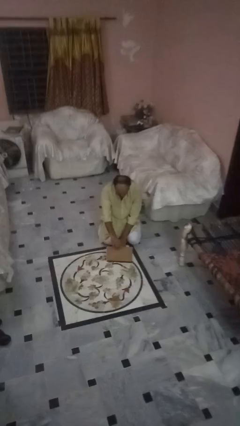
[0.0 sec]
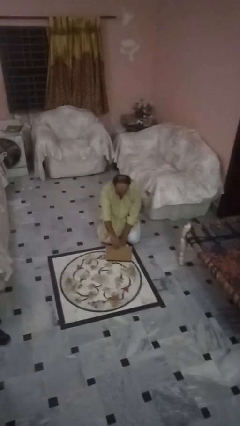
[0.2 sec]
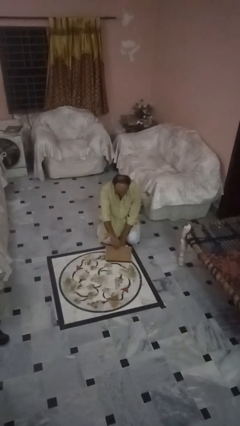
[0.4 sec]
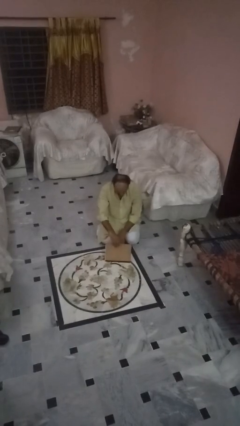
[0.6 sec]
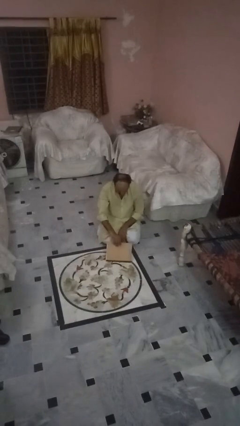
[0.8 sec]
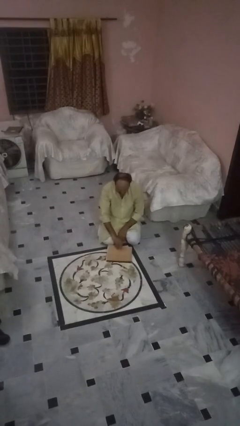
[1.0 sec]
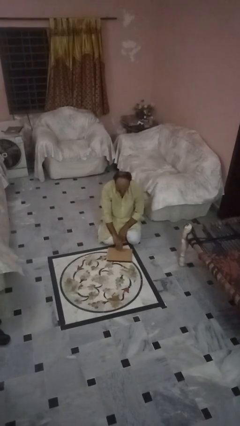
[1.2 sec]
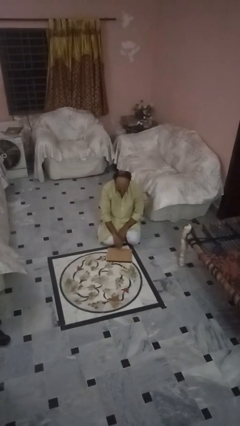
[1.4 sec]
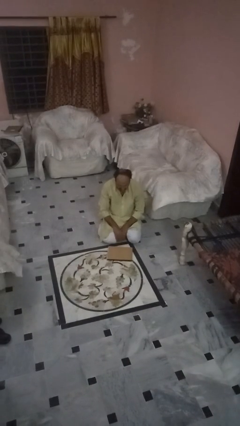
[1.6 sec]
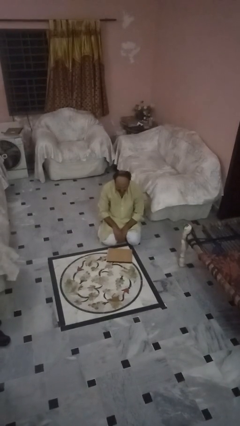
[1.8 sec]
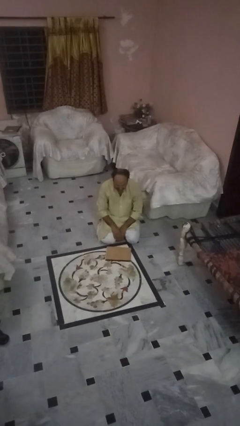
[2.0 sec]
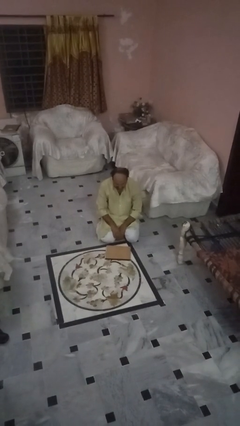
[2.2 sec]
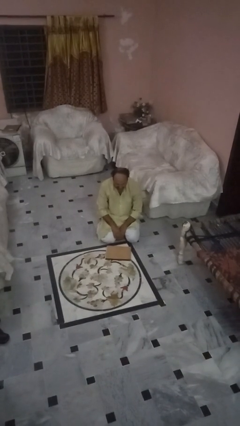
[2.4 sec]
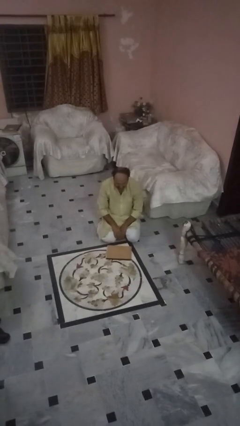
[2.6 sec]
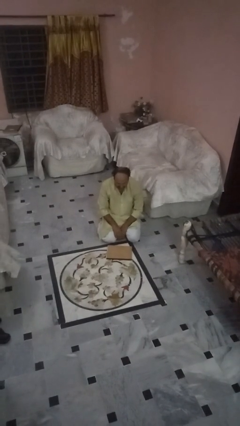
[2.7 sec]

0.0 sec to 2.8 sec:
person closes laptop

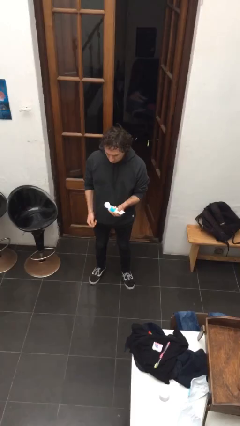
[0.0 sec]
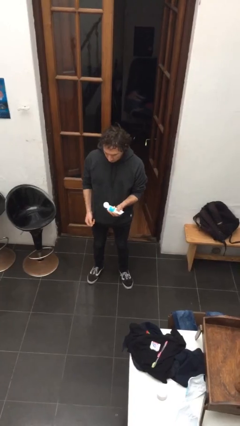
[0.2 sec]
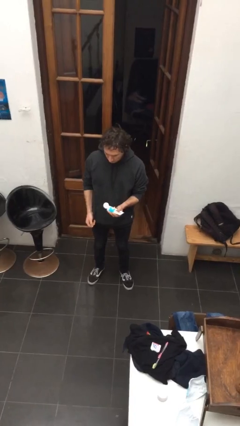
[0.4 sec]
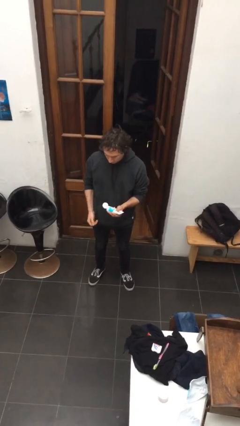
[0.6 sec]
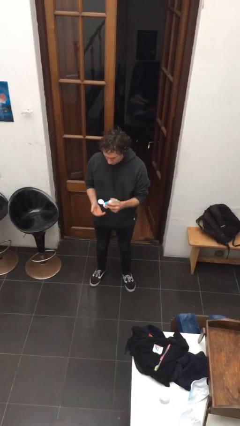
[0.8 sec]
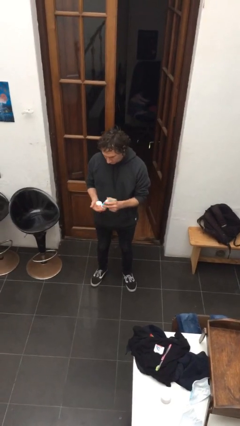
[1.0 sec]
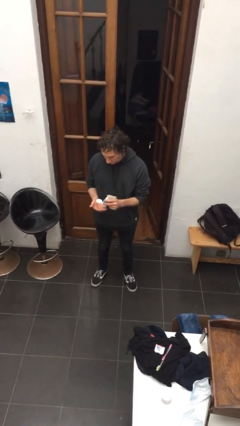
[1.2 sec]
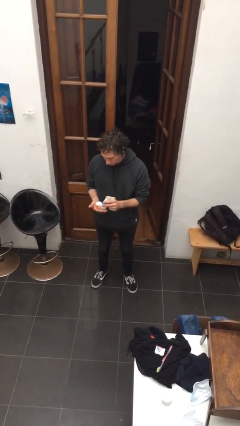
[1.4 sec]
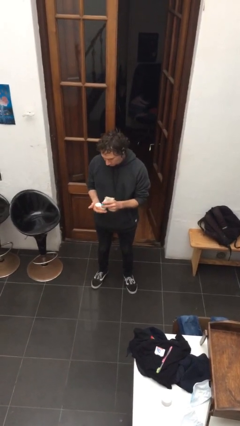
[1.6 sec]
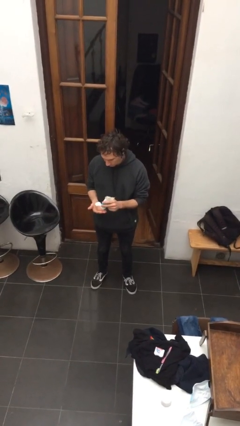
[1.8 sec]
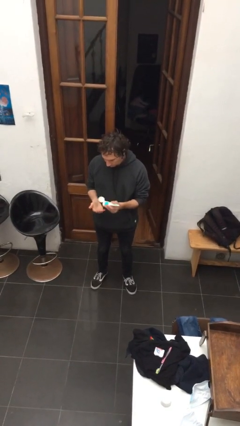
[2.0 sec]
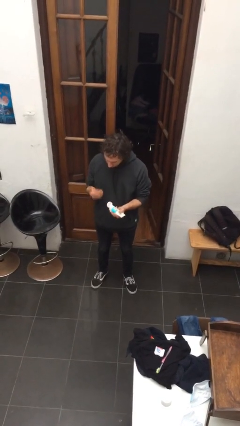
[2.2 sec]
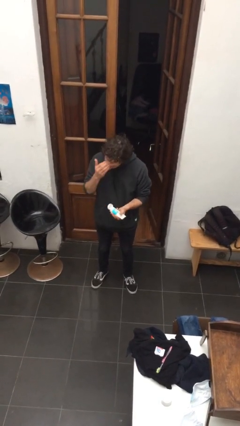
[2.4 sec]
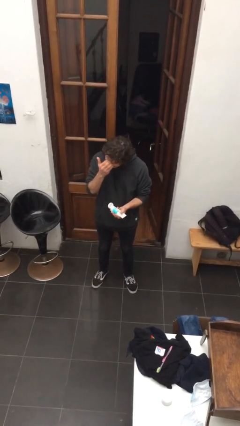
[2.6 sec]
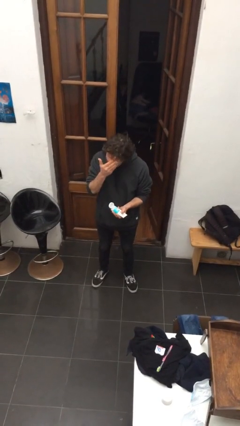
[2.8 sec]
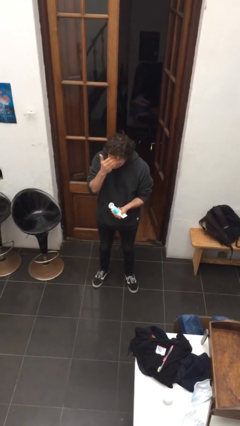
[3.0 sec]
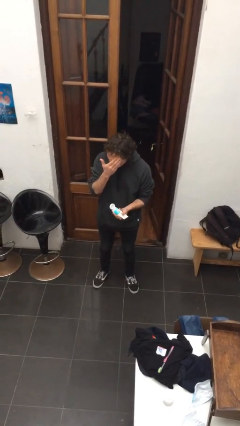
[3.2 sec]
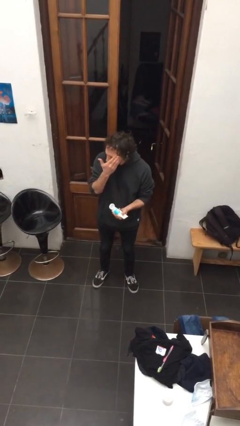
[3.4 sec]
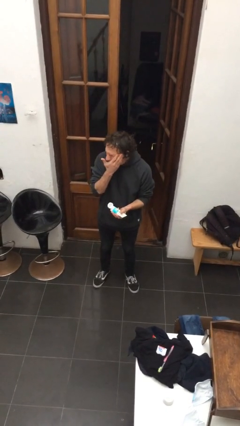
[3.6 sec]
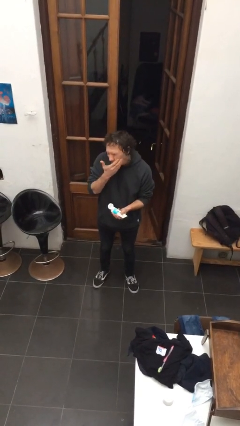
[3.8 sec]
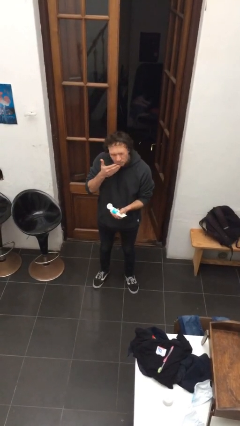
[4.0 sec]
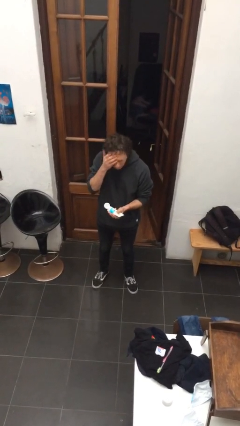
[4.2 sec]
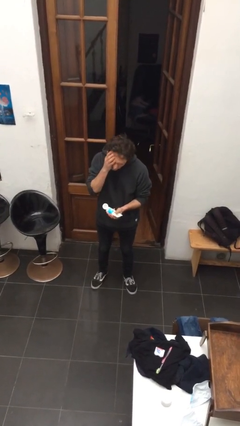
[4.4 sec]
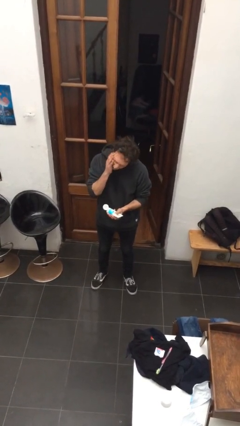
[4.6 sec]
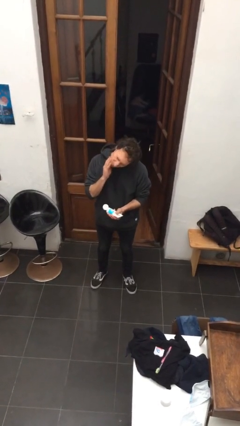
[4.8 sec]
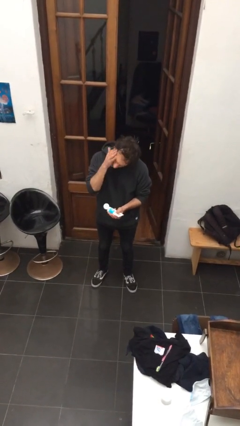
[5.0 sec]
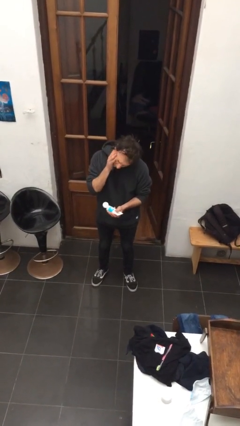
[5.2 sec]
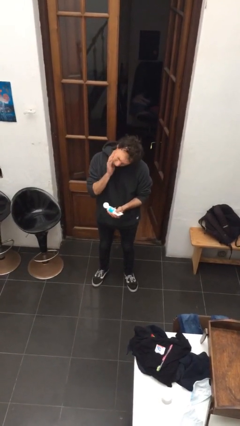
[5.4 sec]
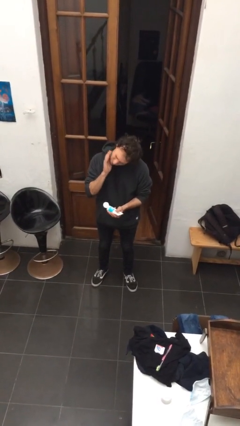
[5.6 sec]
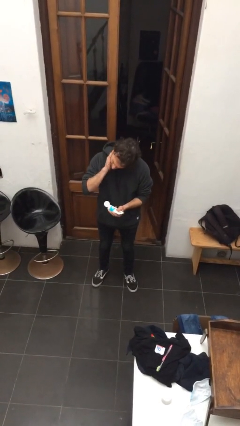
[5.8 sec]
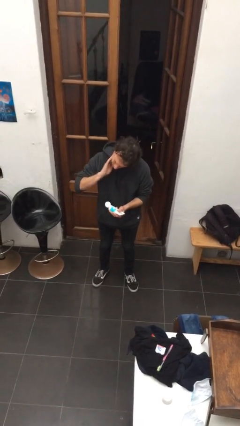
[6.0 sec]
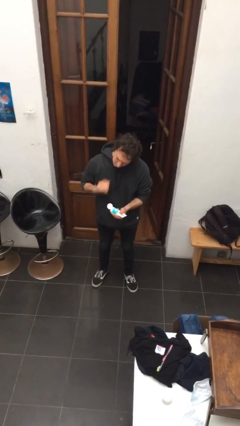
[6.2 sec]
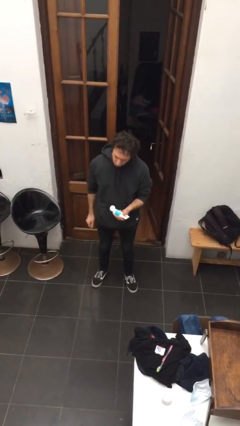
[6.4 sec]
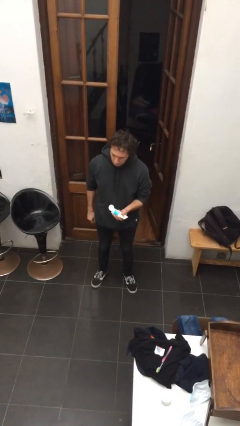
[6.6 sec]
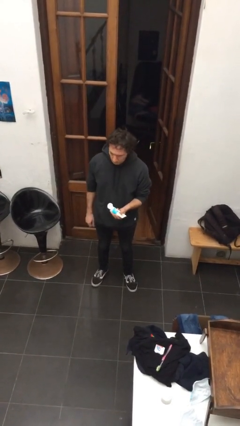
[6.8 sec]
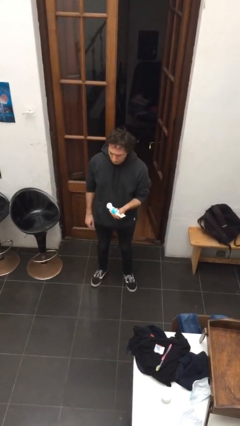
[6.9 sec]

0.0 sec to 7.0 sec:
person applies facial moisturizer

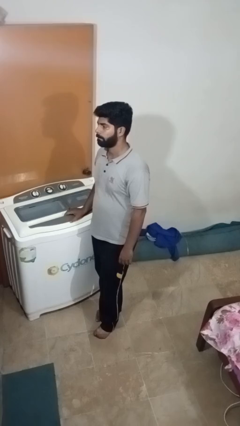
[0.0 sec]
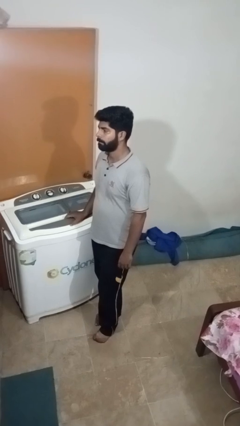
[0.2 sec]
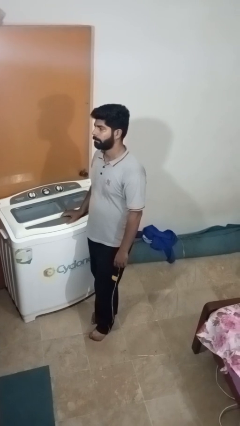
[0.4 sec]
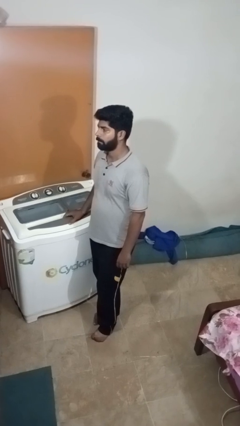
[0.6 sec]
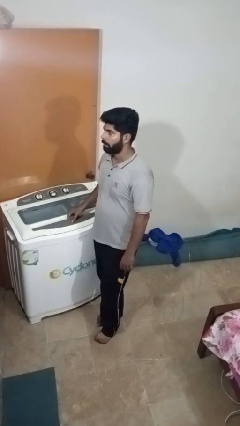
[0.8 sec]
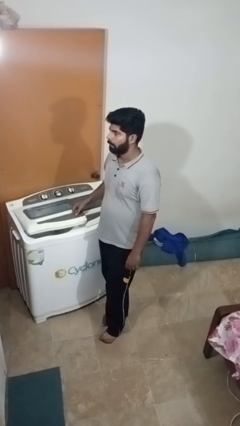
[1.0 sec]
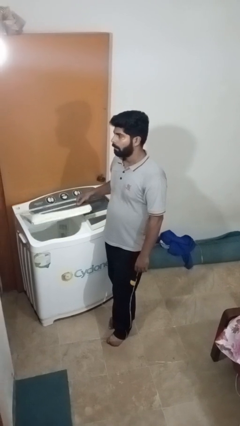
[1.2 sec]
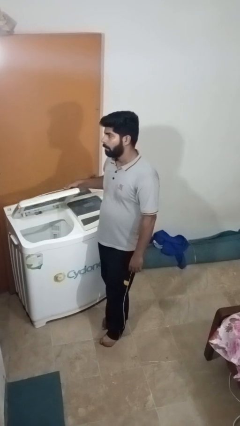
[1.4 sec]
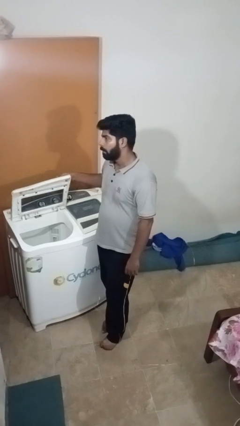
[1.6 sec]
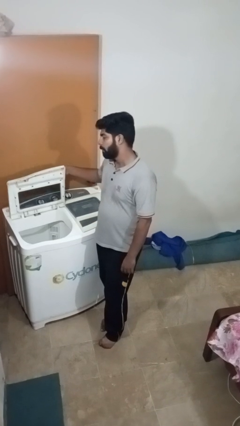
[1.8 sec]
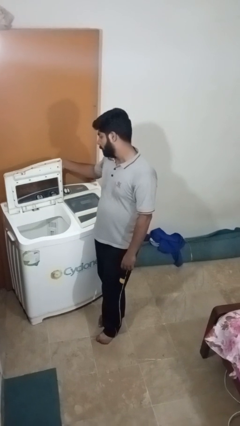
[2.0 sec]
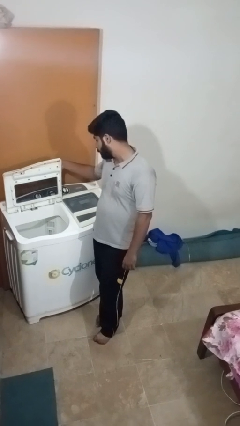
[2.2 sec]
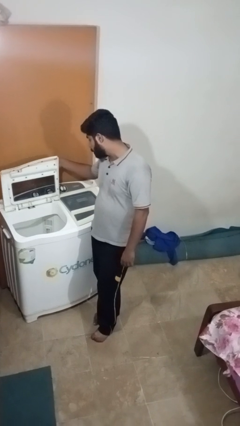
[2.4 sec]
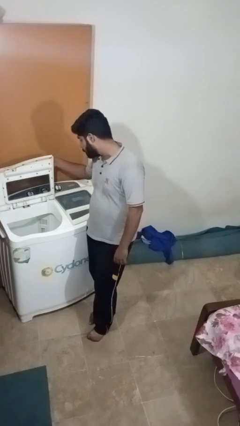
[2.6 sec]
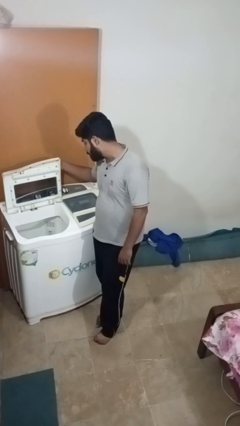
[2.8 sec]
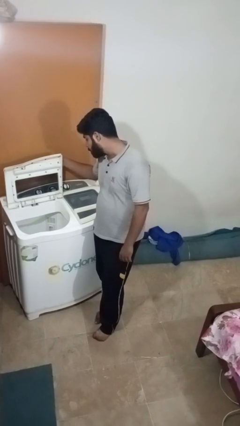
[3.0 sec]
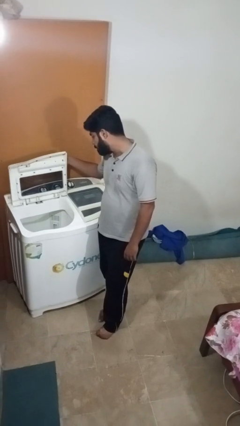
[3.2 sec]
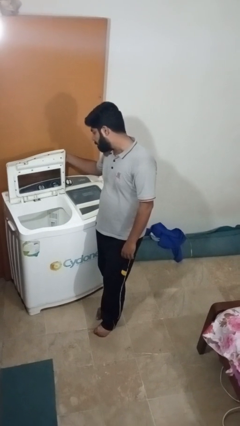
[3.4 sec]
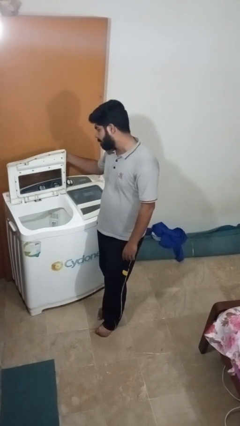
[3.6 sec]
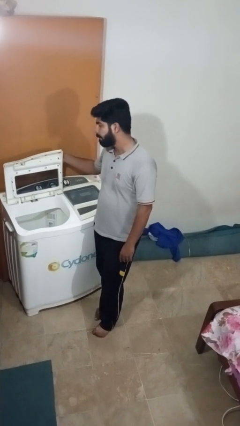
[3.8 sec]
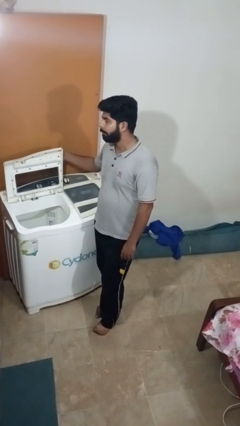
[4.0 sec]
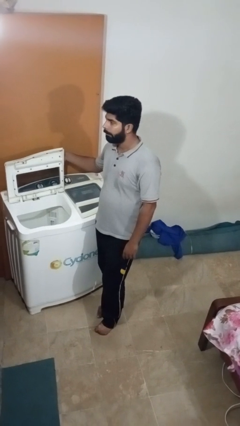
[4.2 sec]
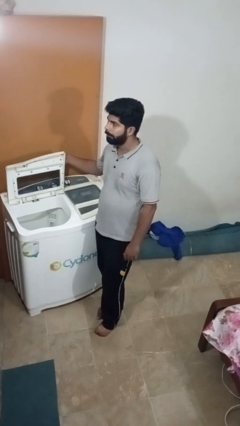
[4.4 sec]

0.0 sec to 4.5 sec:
person opens clothes washer

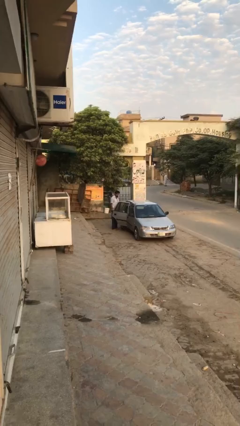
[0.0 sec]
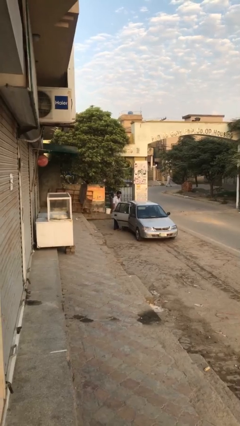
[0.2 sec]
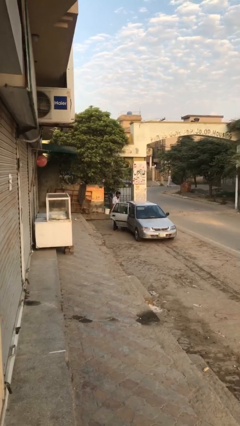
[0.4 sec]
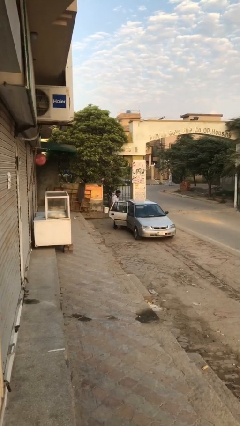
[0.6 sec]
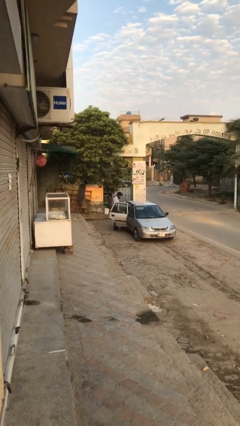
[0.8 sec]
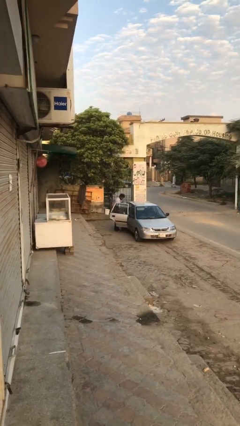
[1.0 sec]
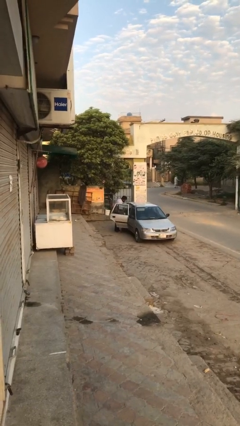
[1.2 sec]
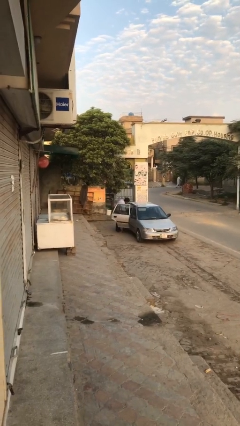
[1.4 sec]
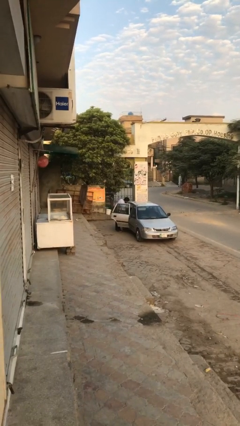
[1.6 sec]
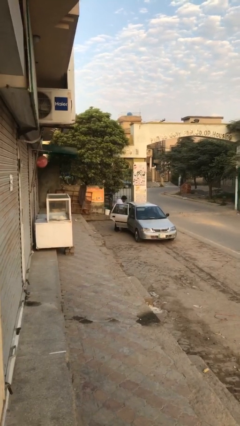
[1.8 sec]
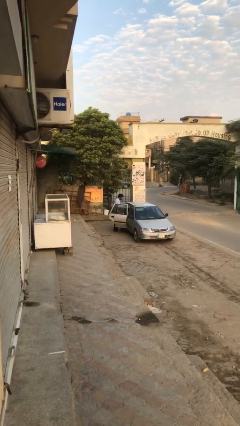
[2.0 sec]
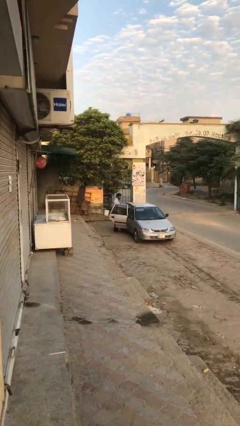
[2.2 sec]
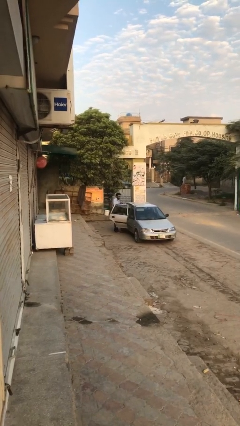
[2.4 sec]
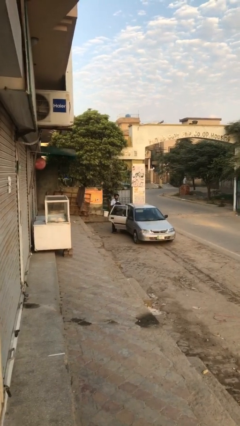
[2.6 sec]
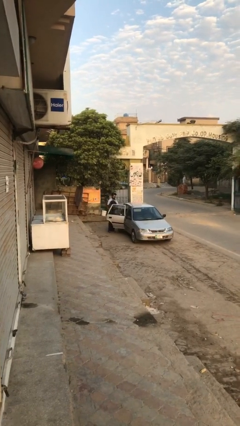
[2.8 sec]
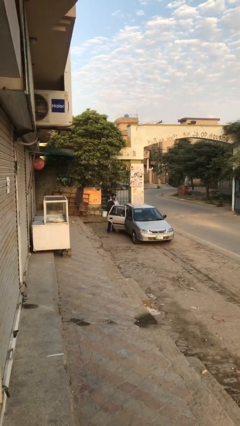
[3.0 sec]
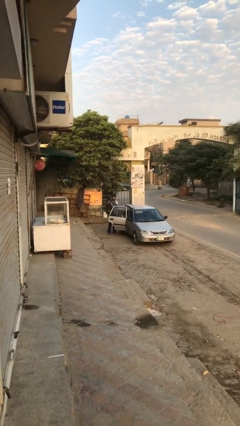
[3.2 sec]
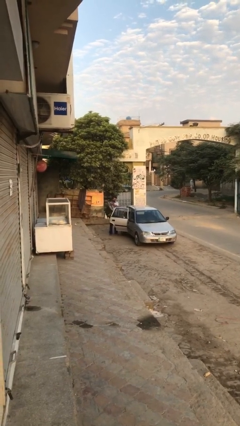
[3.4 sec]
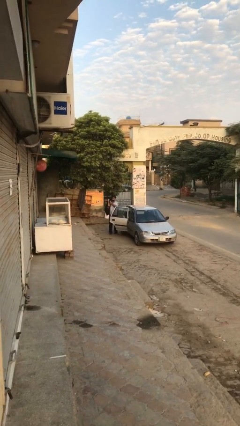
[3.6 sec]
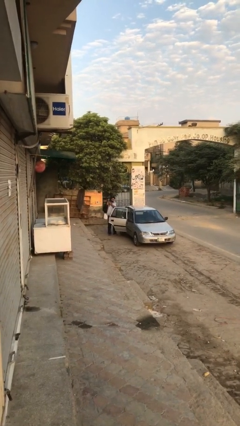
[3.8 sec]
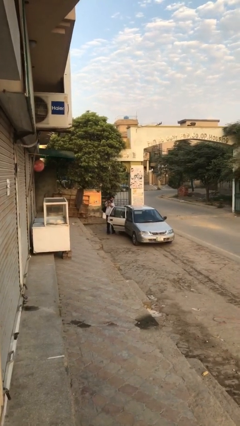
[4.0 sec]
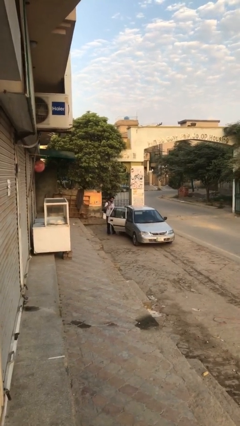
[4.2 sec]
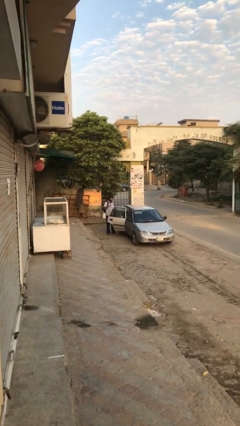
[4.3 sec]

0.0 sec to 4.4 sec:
person unloads car
